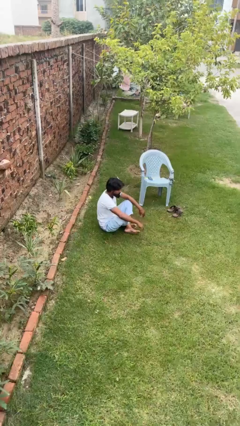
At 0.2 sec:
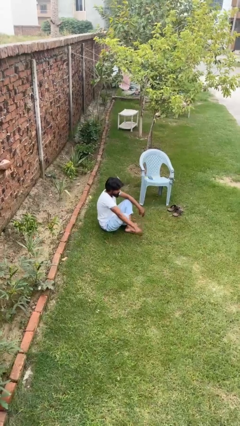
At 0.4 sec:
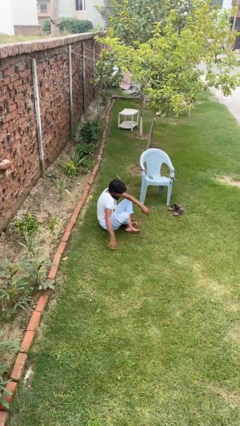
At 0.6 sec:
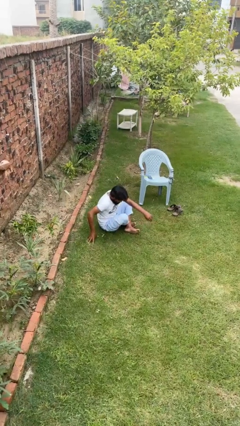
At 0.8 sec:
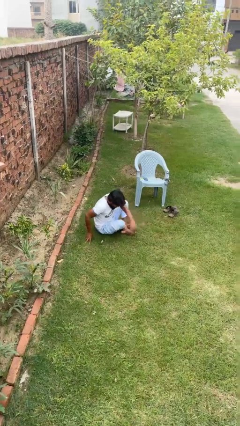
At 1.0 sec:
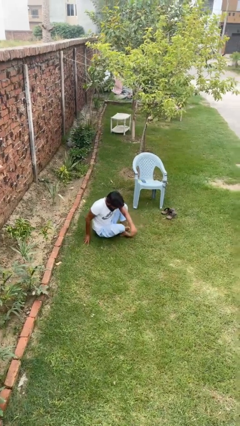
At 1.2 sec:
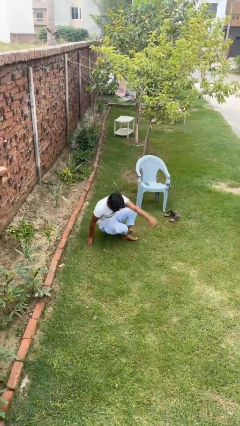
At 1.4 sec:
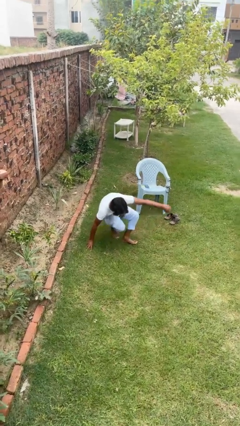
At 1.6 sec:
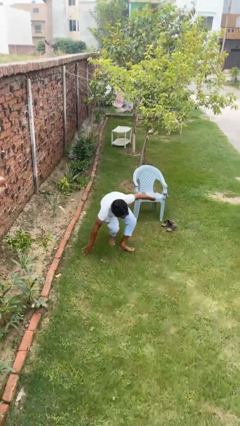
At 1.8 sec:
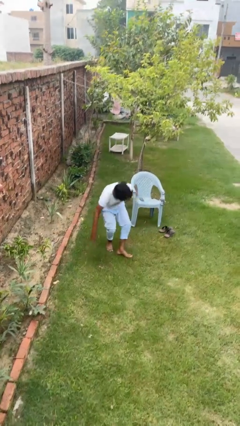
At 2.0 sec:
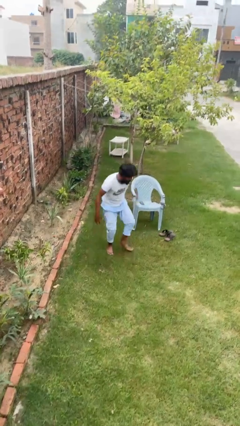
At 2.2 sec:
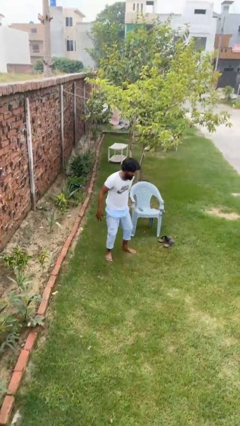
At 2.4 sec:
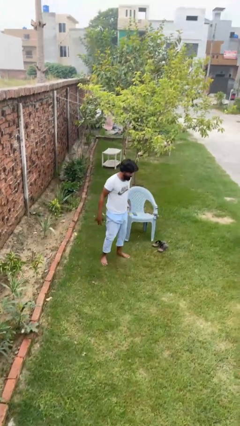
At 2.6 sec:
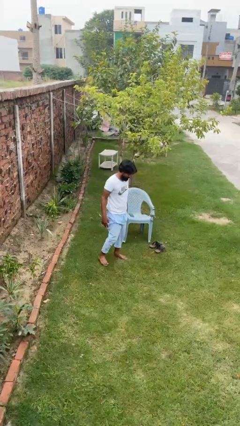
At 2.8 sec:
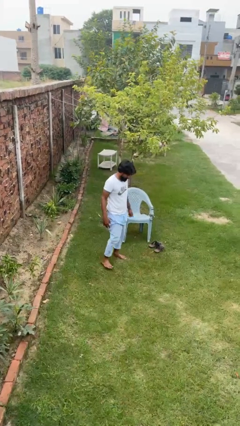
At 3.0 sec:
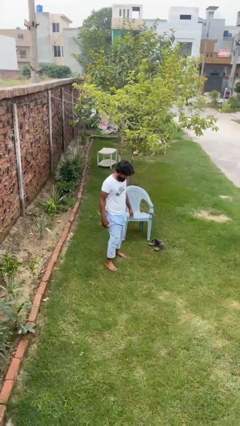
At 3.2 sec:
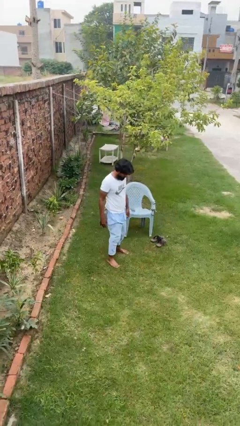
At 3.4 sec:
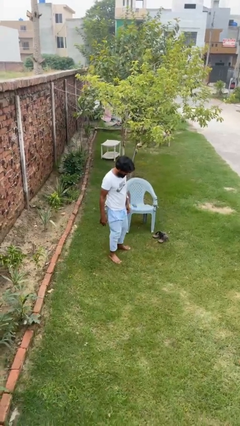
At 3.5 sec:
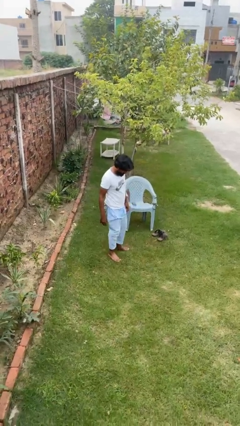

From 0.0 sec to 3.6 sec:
person stands up from floor

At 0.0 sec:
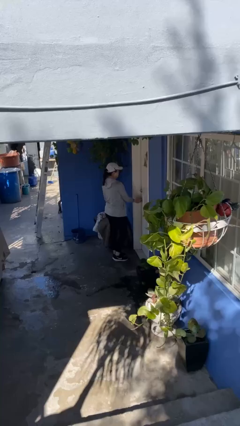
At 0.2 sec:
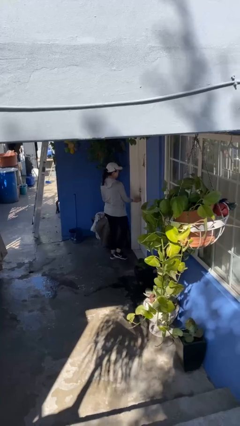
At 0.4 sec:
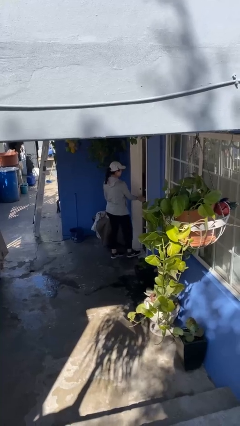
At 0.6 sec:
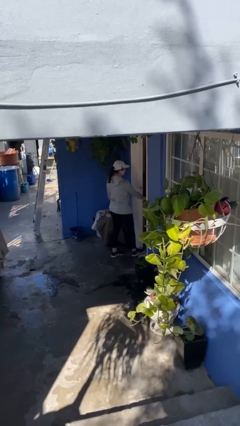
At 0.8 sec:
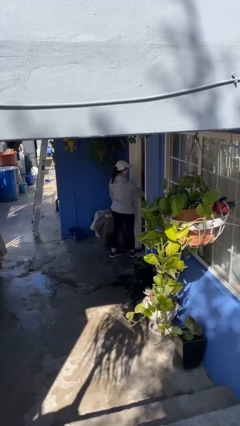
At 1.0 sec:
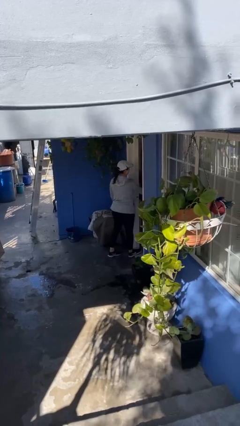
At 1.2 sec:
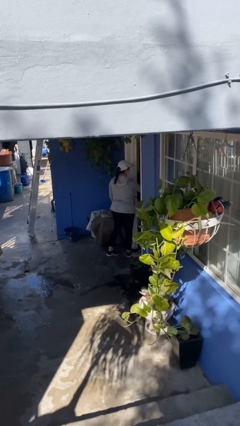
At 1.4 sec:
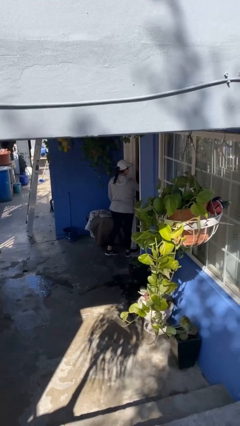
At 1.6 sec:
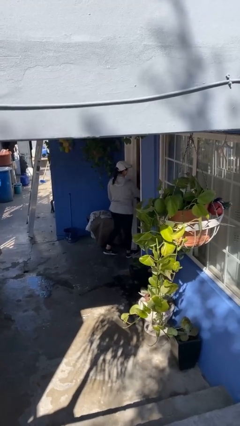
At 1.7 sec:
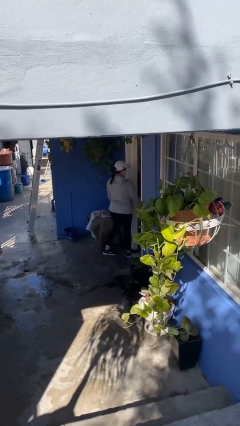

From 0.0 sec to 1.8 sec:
person opens facility door

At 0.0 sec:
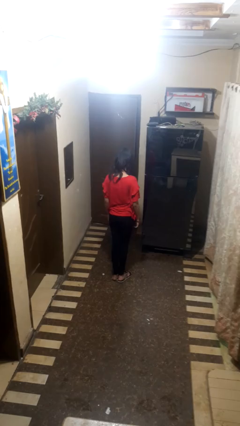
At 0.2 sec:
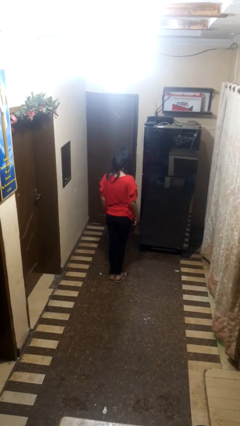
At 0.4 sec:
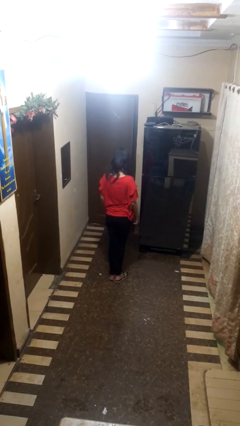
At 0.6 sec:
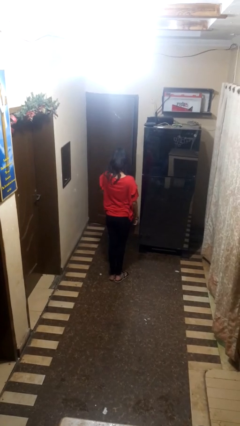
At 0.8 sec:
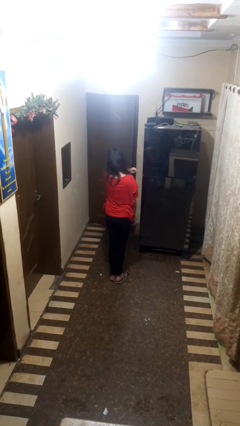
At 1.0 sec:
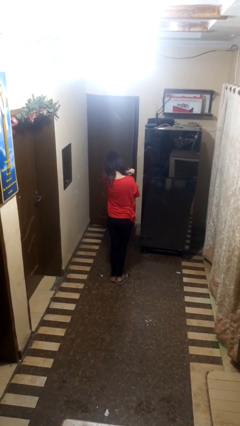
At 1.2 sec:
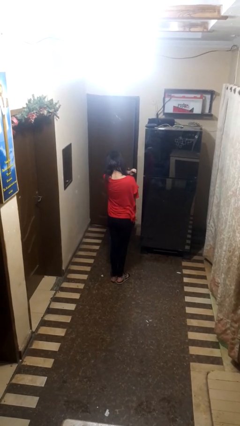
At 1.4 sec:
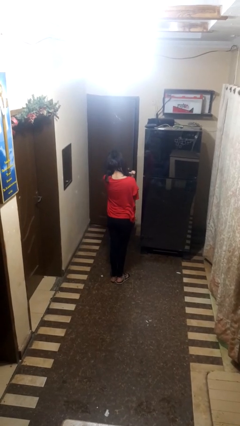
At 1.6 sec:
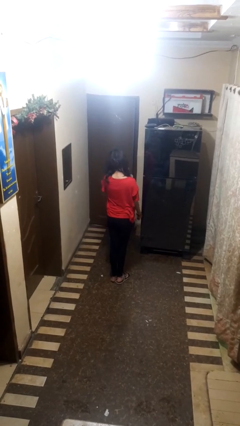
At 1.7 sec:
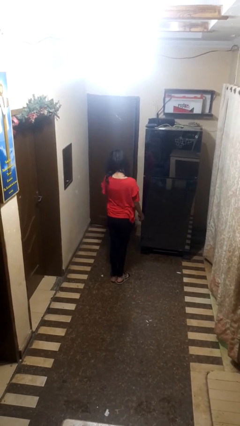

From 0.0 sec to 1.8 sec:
person sneezes into arm

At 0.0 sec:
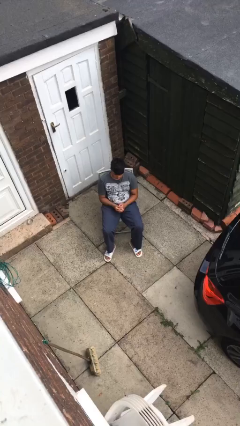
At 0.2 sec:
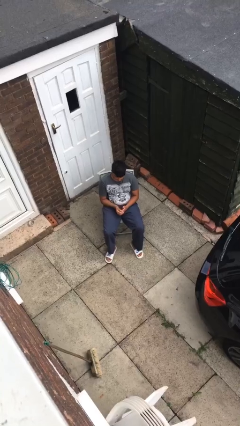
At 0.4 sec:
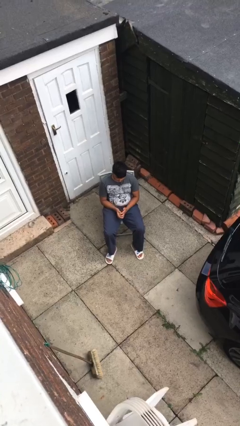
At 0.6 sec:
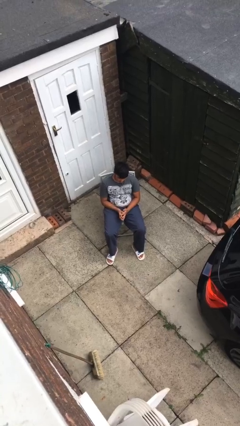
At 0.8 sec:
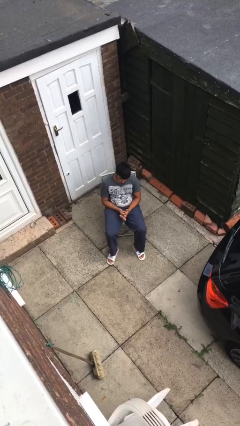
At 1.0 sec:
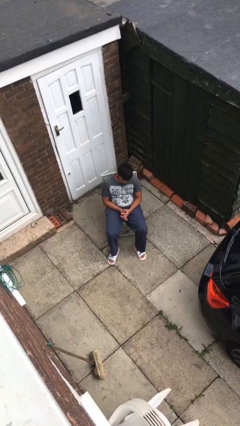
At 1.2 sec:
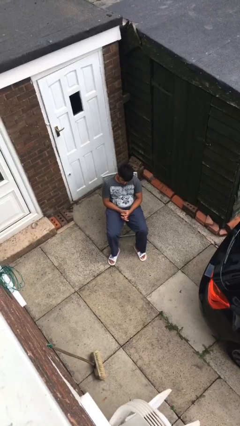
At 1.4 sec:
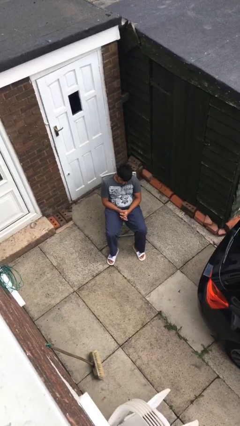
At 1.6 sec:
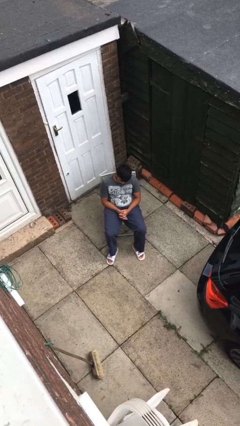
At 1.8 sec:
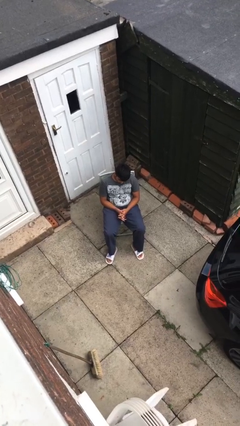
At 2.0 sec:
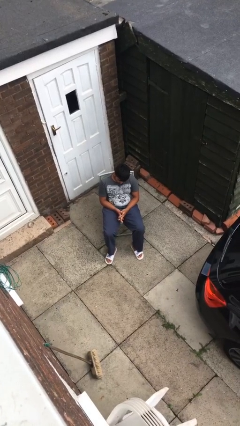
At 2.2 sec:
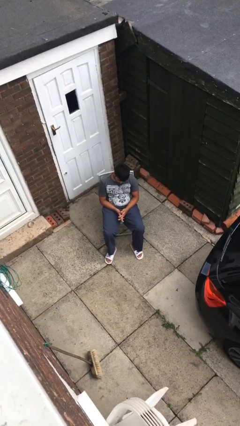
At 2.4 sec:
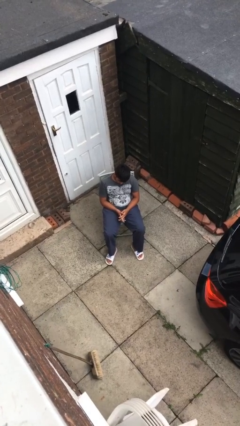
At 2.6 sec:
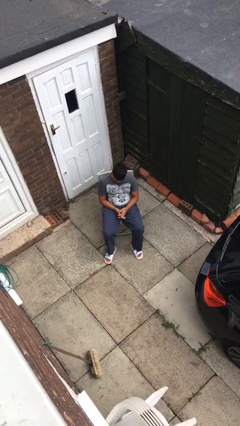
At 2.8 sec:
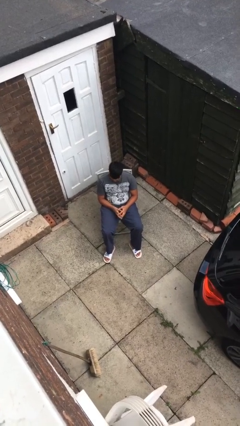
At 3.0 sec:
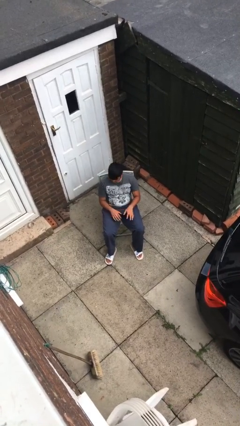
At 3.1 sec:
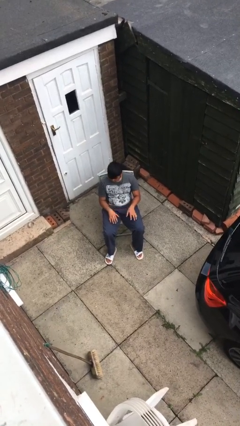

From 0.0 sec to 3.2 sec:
person looks at hands in lap

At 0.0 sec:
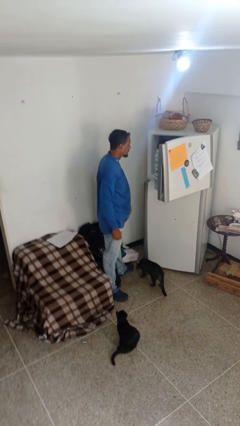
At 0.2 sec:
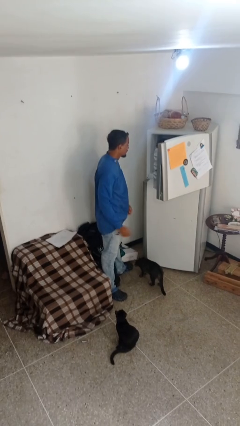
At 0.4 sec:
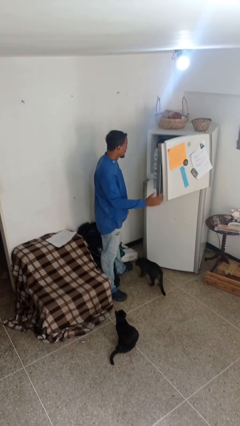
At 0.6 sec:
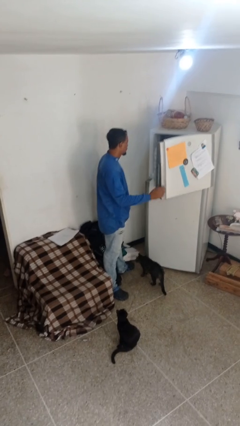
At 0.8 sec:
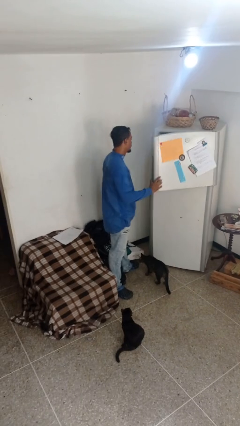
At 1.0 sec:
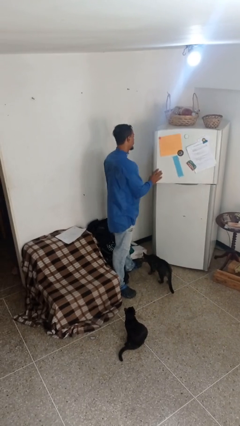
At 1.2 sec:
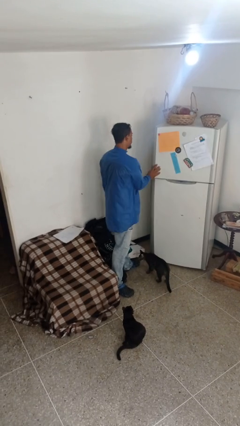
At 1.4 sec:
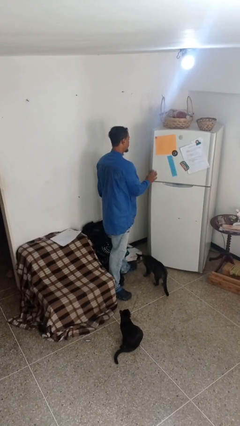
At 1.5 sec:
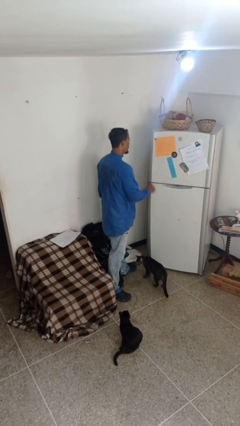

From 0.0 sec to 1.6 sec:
person closes refrigerator

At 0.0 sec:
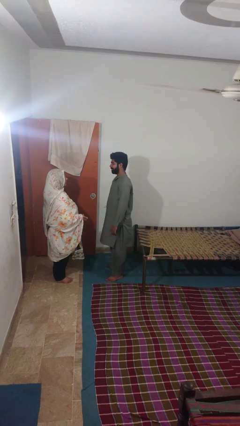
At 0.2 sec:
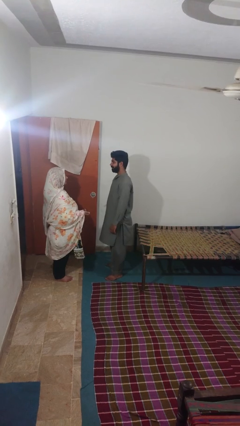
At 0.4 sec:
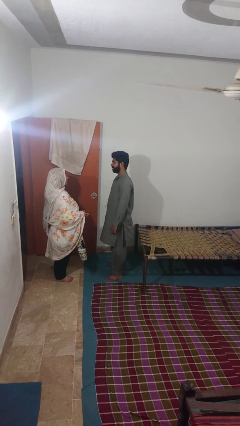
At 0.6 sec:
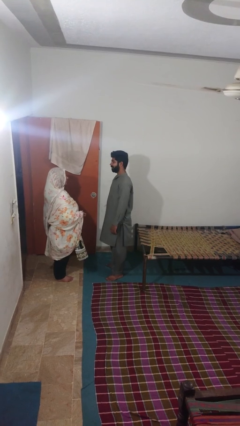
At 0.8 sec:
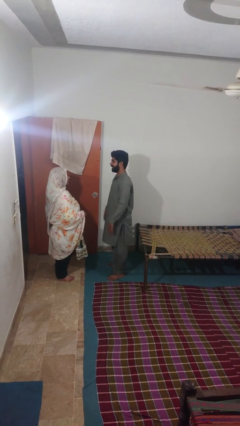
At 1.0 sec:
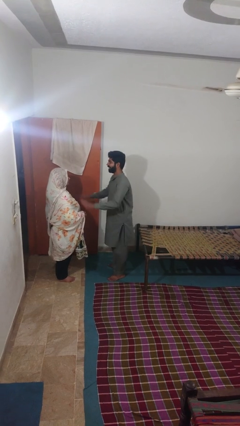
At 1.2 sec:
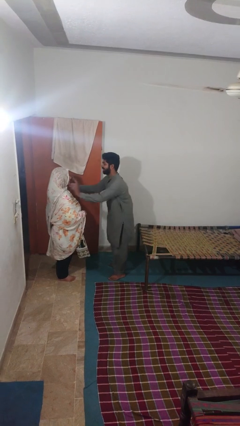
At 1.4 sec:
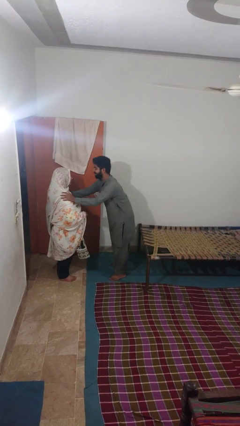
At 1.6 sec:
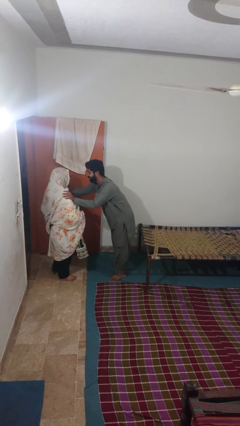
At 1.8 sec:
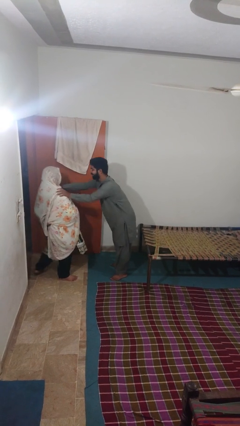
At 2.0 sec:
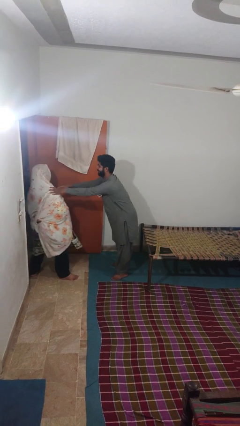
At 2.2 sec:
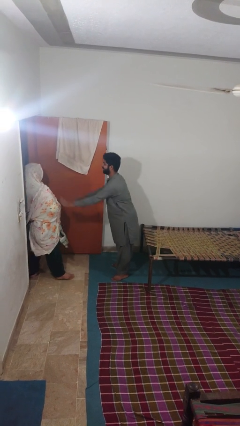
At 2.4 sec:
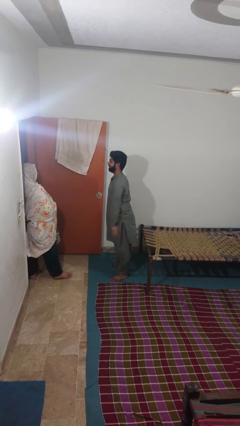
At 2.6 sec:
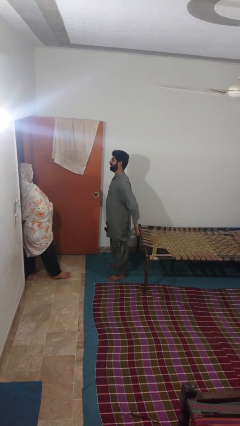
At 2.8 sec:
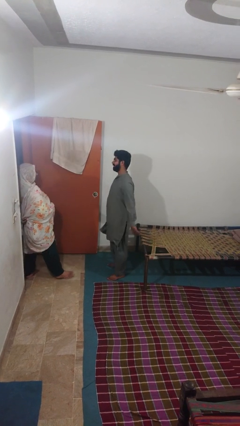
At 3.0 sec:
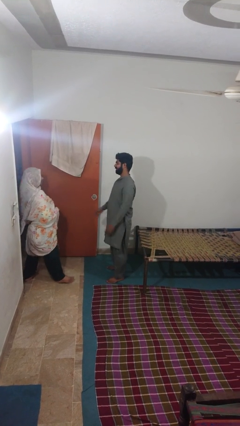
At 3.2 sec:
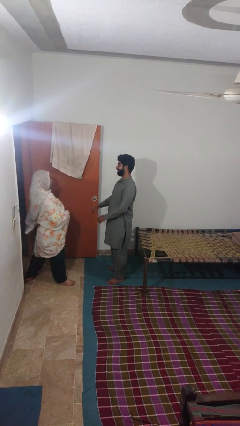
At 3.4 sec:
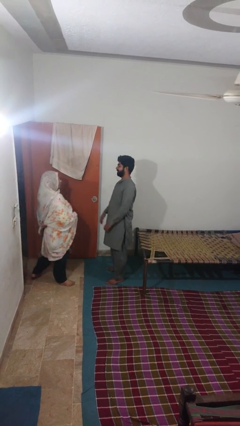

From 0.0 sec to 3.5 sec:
person shoves person

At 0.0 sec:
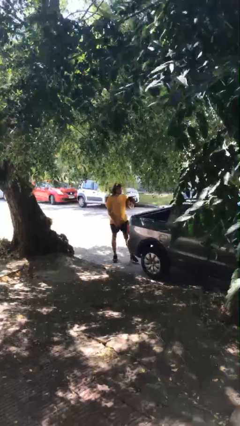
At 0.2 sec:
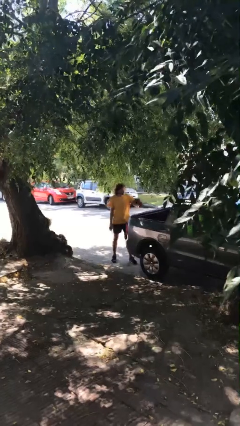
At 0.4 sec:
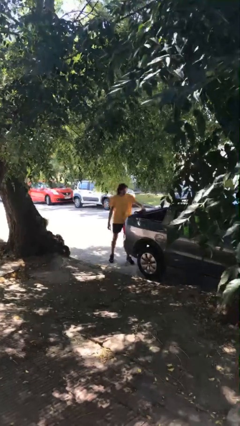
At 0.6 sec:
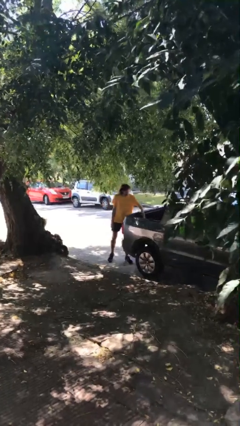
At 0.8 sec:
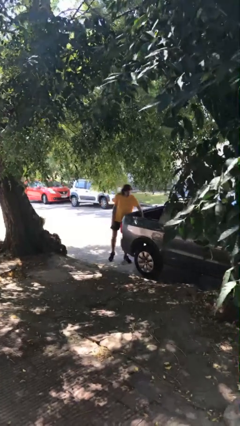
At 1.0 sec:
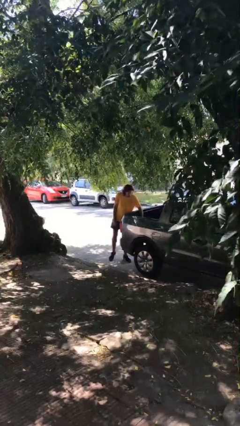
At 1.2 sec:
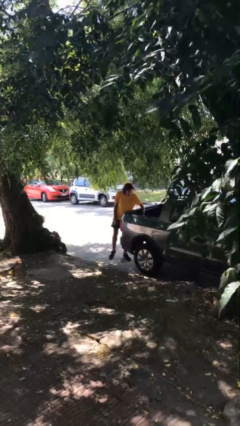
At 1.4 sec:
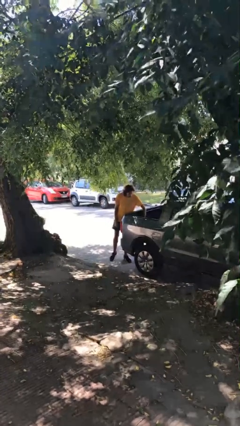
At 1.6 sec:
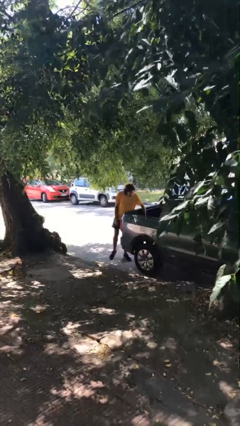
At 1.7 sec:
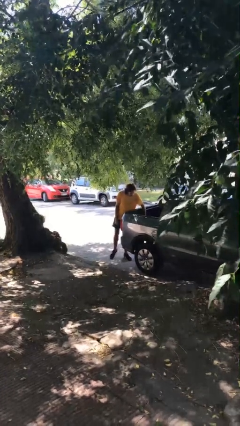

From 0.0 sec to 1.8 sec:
person loads car
